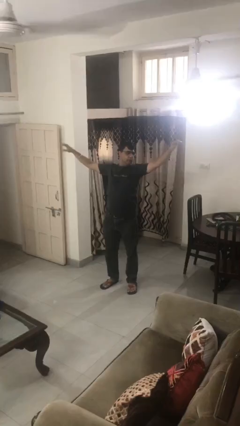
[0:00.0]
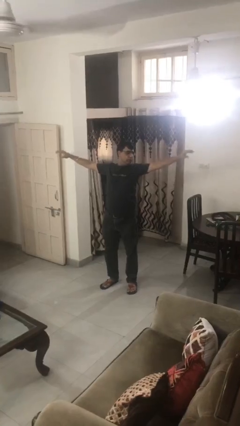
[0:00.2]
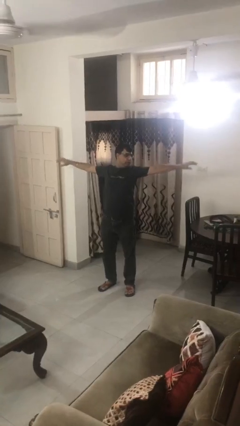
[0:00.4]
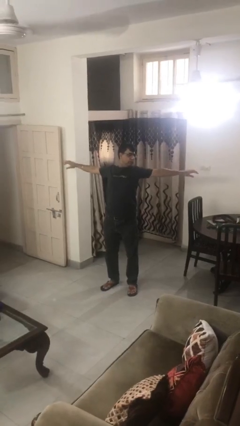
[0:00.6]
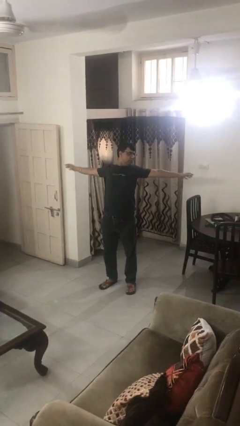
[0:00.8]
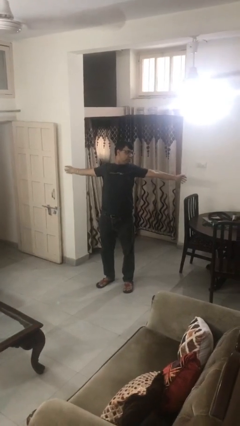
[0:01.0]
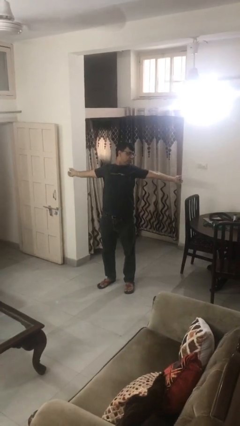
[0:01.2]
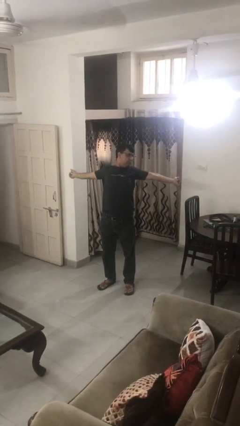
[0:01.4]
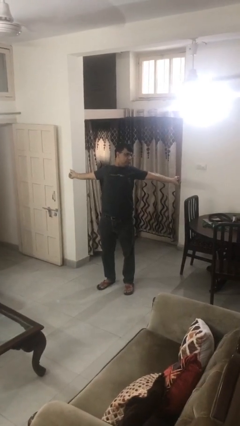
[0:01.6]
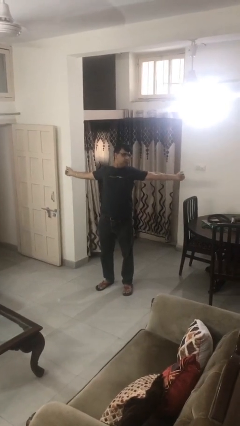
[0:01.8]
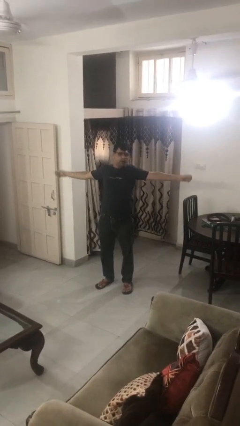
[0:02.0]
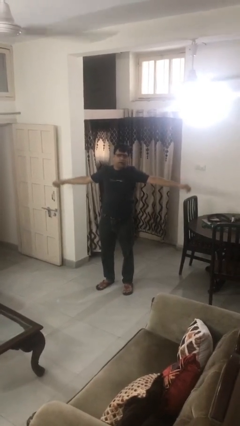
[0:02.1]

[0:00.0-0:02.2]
person stretches arms to side

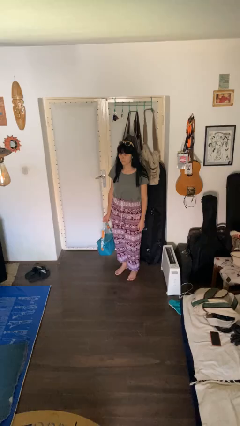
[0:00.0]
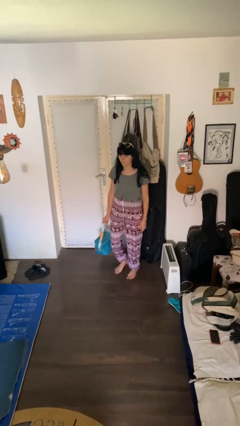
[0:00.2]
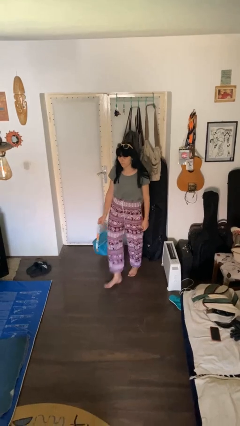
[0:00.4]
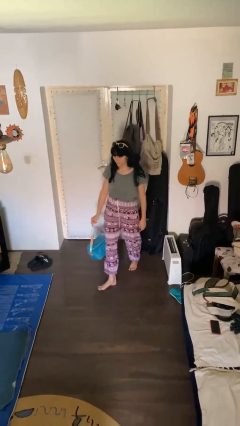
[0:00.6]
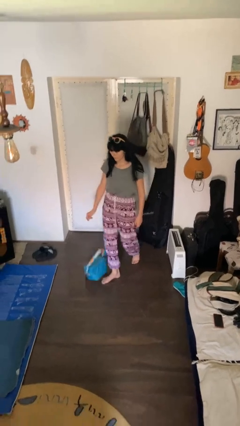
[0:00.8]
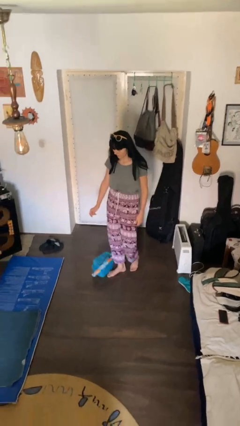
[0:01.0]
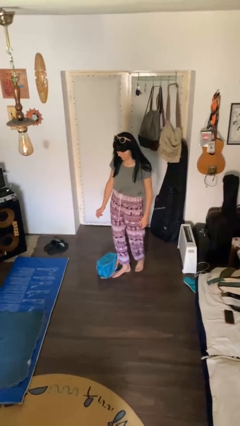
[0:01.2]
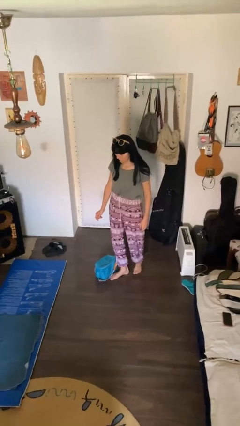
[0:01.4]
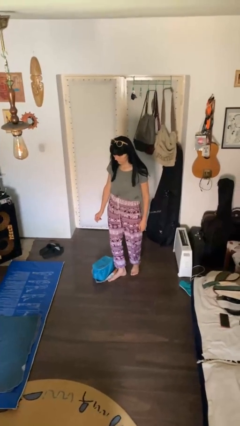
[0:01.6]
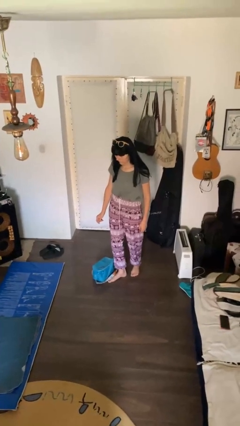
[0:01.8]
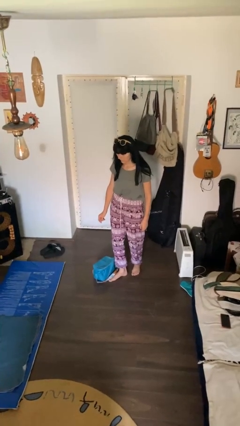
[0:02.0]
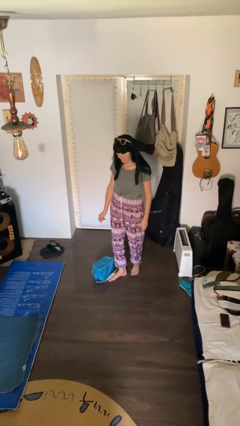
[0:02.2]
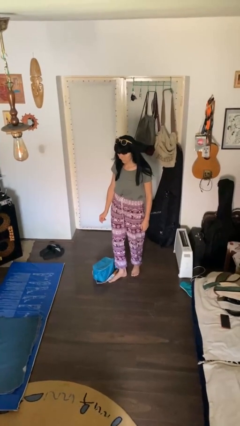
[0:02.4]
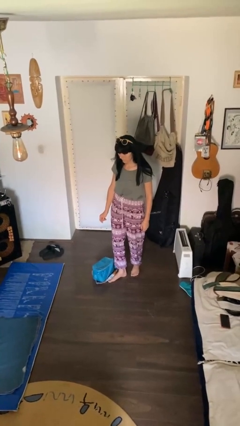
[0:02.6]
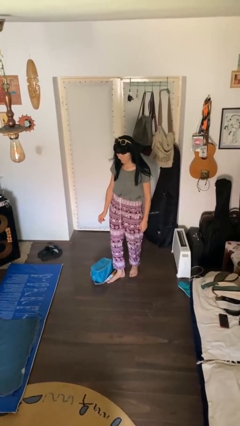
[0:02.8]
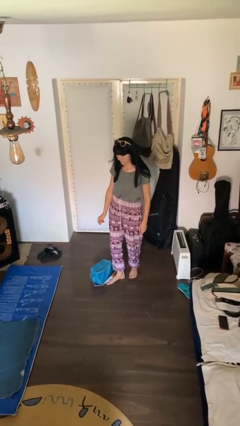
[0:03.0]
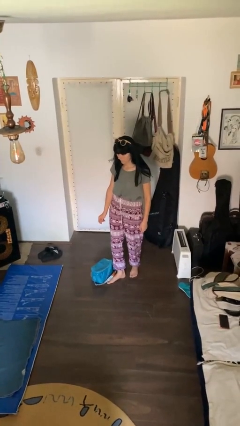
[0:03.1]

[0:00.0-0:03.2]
person drops object

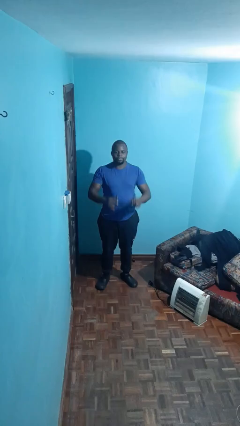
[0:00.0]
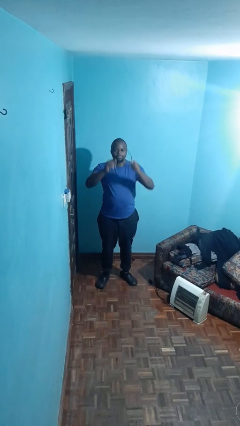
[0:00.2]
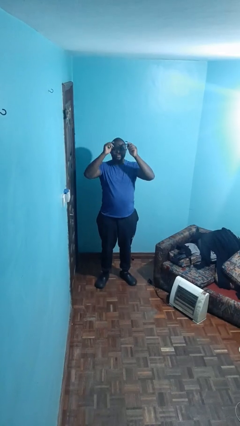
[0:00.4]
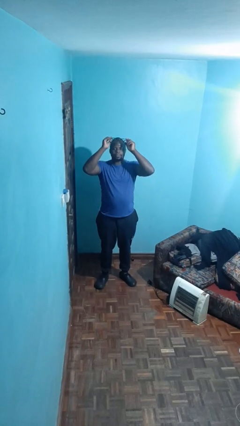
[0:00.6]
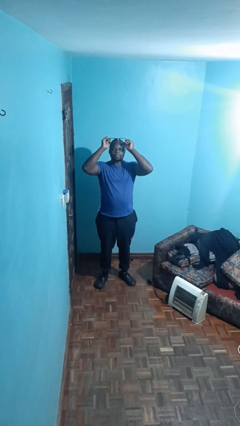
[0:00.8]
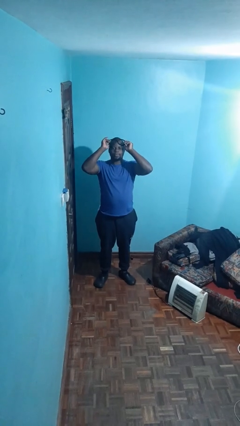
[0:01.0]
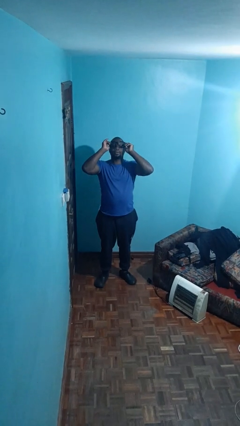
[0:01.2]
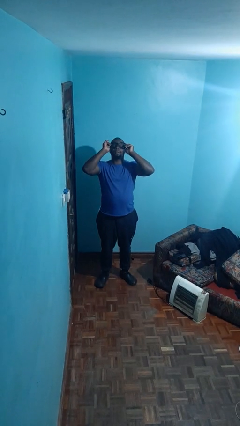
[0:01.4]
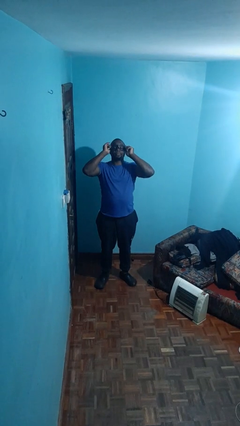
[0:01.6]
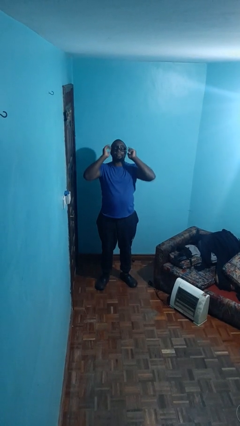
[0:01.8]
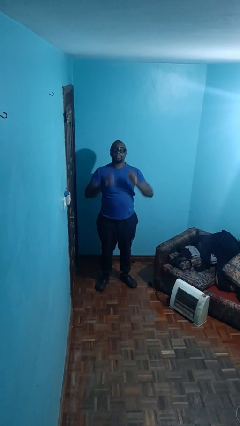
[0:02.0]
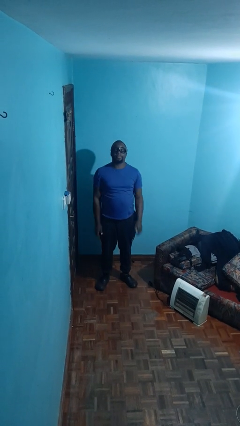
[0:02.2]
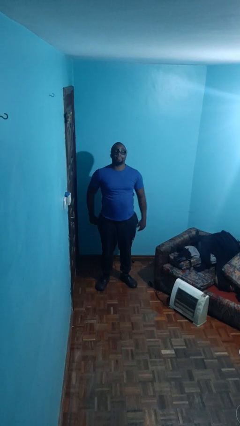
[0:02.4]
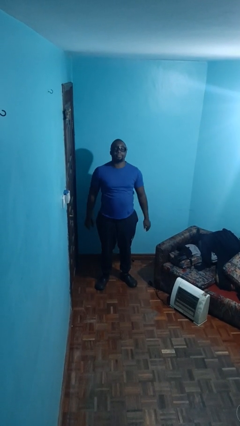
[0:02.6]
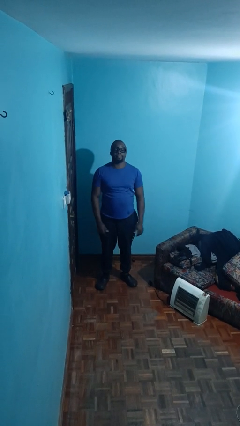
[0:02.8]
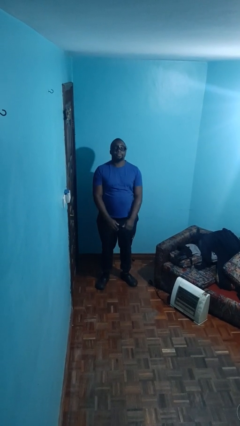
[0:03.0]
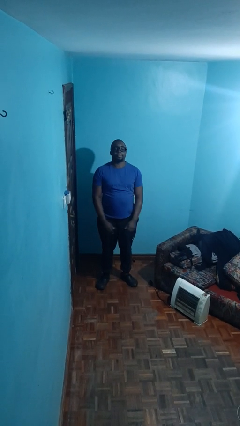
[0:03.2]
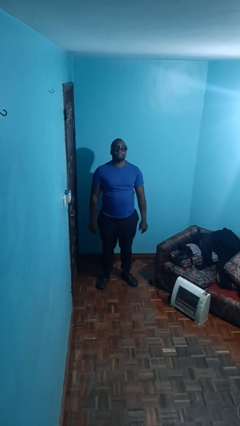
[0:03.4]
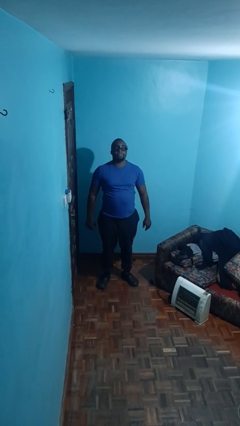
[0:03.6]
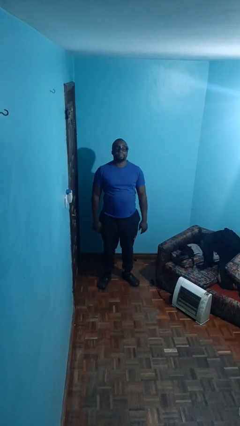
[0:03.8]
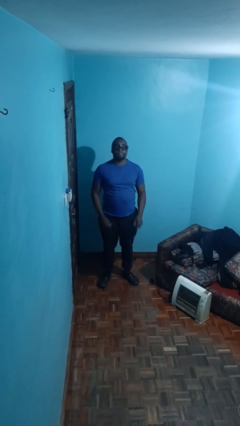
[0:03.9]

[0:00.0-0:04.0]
person puts on glasses

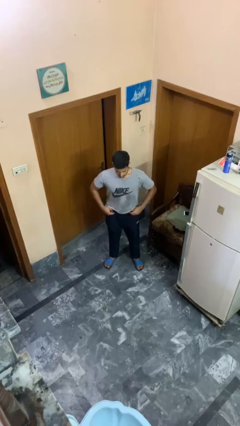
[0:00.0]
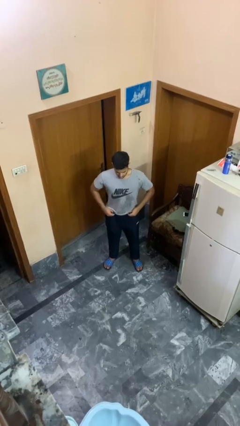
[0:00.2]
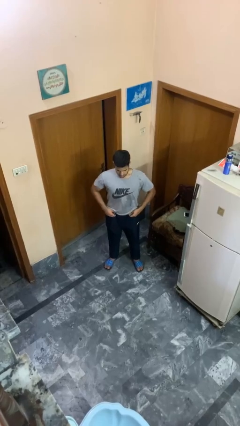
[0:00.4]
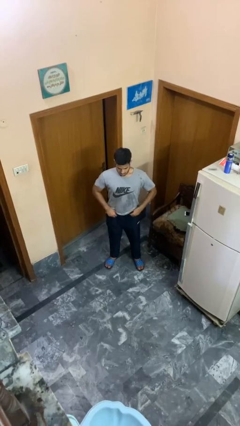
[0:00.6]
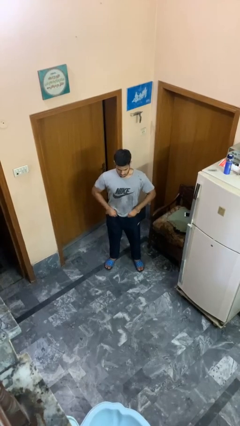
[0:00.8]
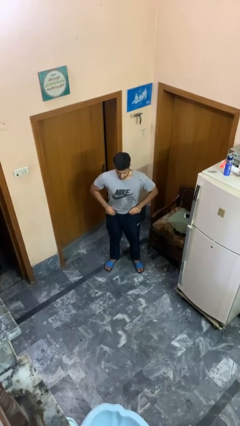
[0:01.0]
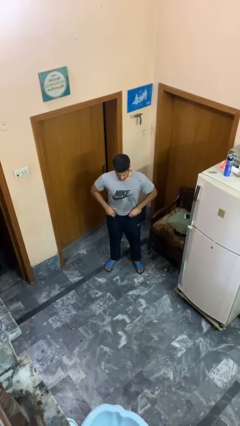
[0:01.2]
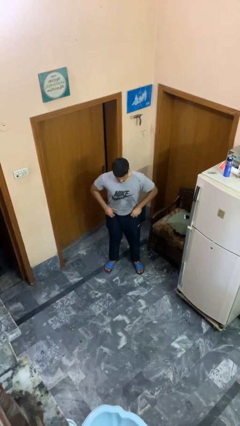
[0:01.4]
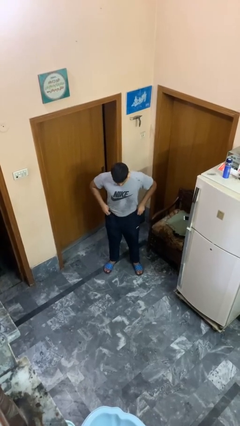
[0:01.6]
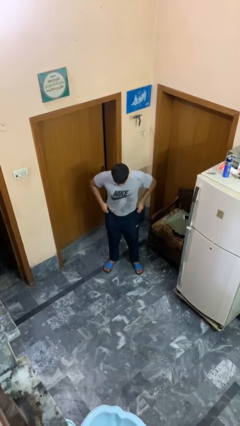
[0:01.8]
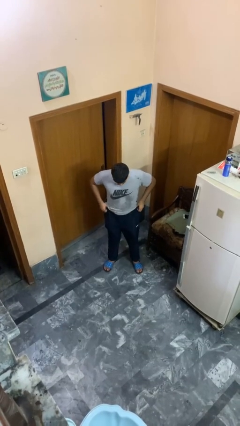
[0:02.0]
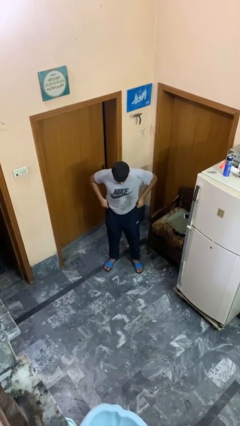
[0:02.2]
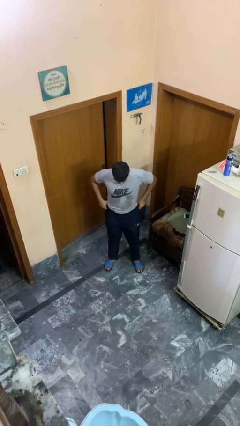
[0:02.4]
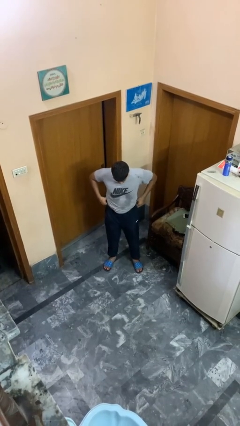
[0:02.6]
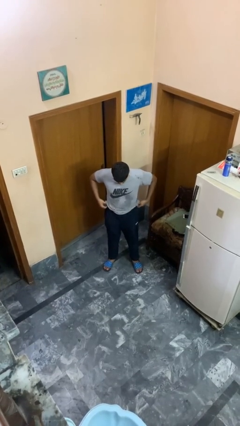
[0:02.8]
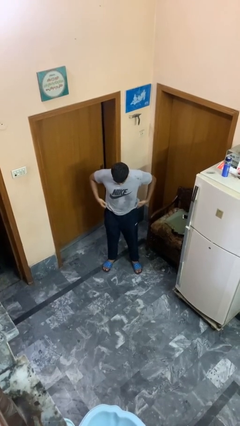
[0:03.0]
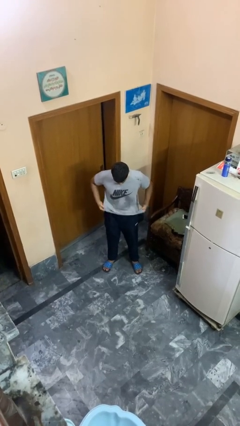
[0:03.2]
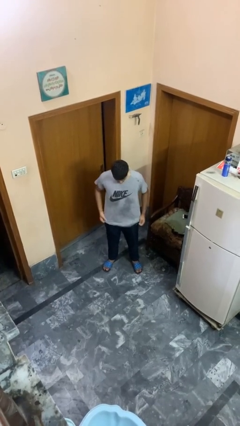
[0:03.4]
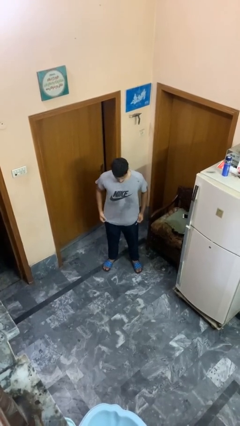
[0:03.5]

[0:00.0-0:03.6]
person hikes up pants

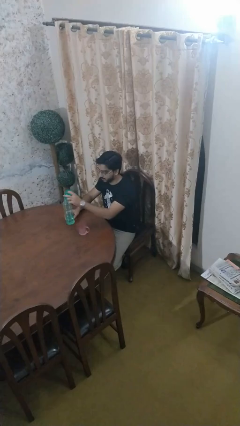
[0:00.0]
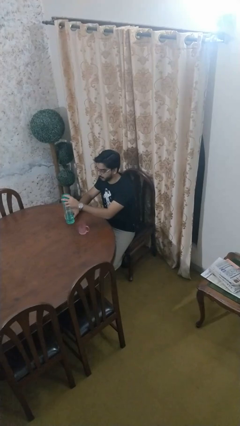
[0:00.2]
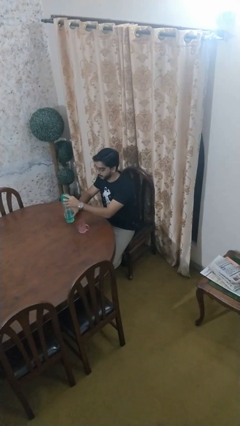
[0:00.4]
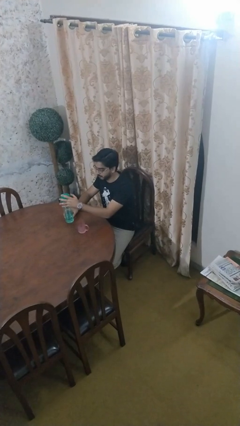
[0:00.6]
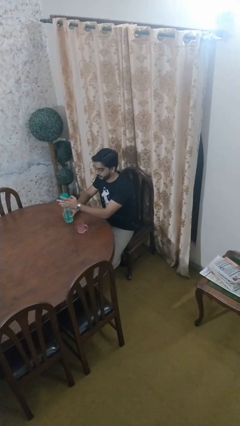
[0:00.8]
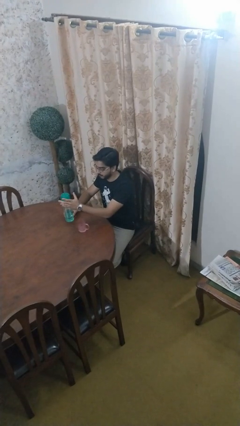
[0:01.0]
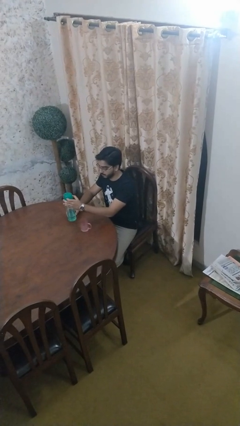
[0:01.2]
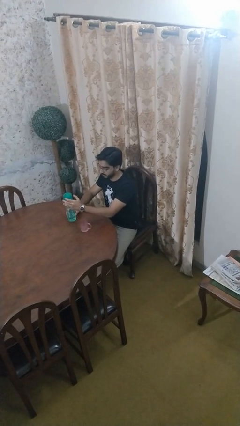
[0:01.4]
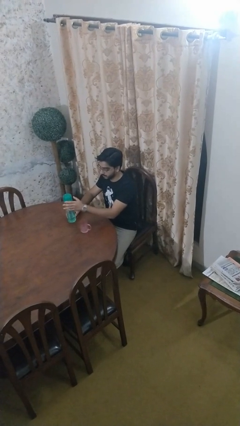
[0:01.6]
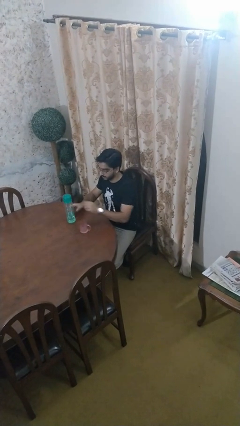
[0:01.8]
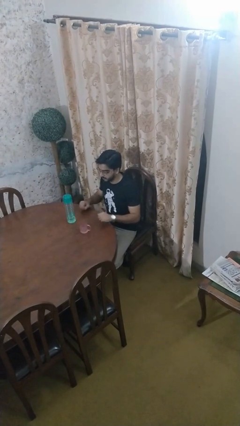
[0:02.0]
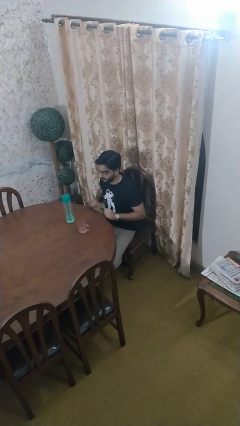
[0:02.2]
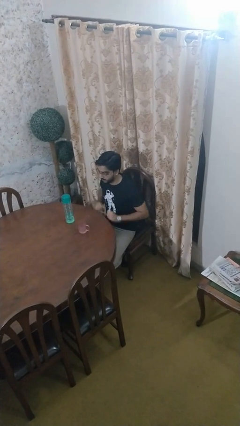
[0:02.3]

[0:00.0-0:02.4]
person screws lid to bottle

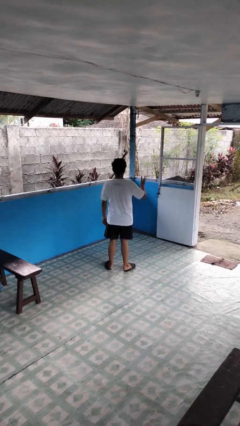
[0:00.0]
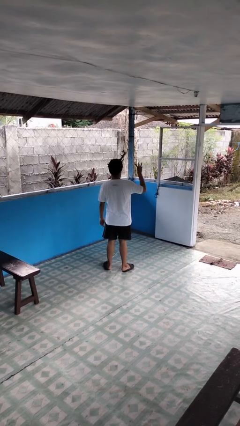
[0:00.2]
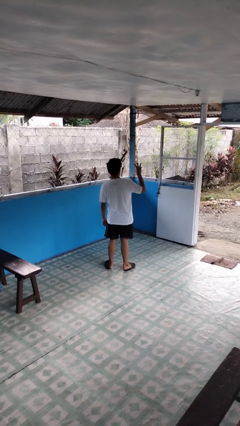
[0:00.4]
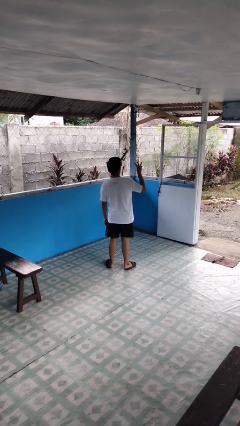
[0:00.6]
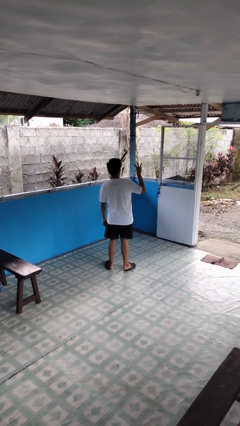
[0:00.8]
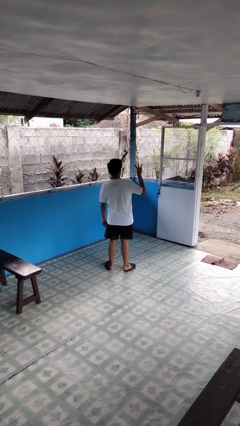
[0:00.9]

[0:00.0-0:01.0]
person gestures number three

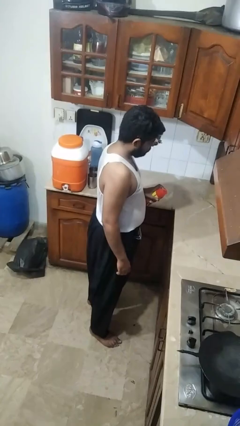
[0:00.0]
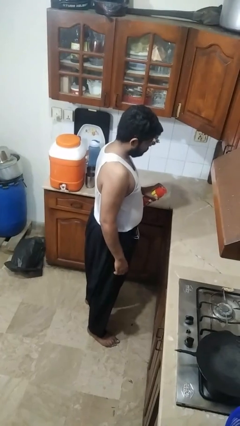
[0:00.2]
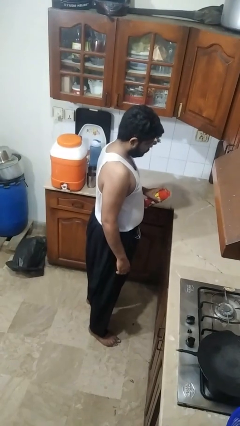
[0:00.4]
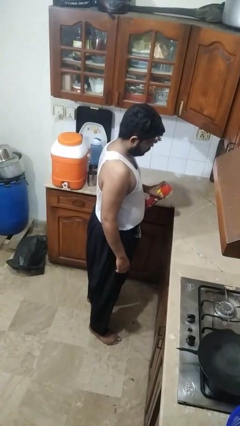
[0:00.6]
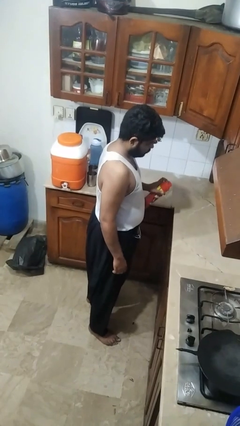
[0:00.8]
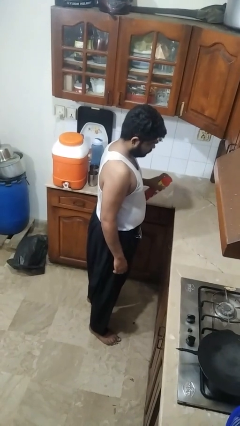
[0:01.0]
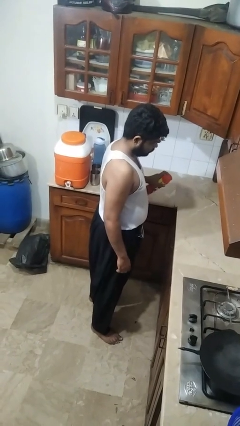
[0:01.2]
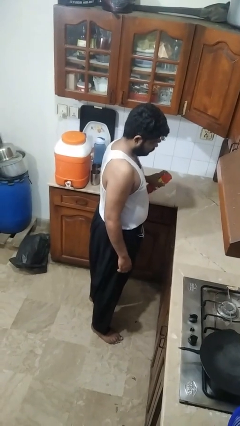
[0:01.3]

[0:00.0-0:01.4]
person sprays from bottle
